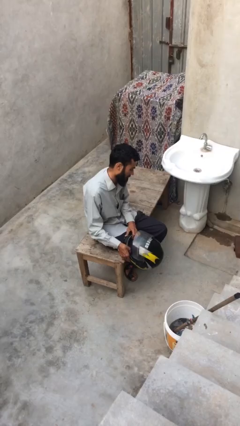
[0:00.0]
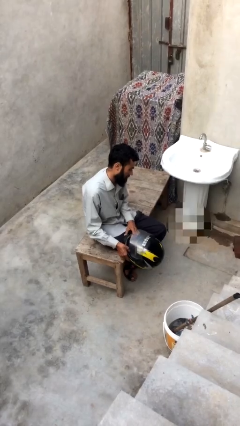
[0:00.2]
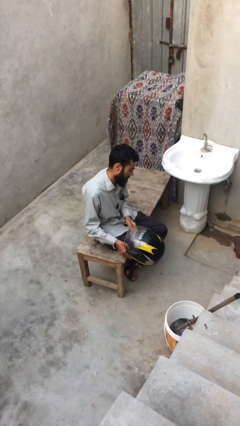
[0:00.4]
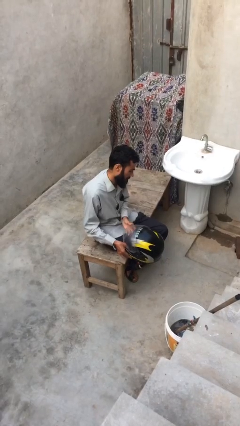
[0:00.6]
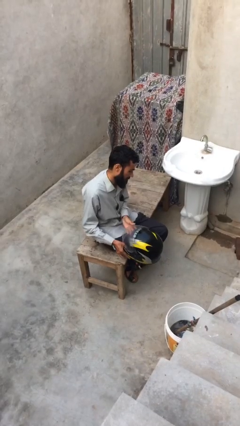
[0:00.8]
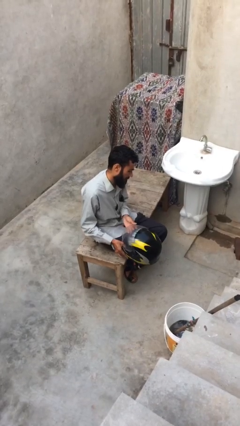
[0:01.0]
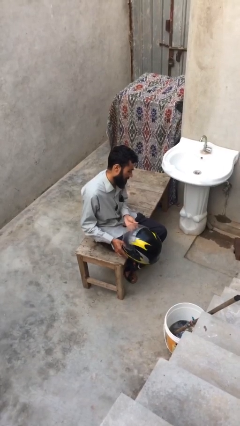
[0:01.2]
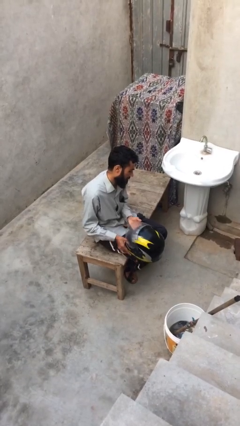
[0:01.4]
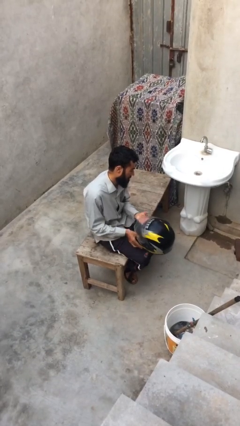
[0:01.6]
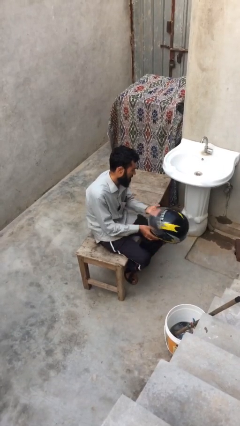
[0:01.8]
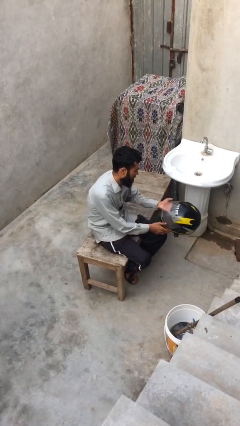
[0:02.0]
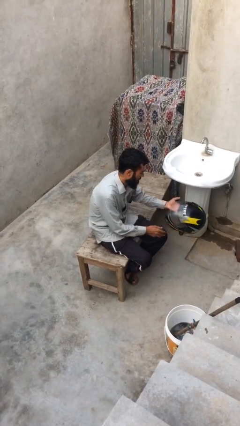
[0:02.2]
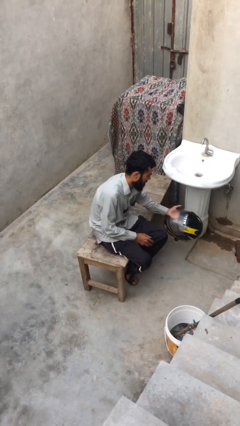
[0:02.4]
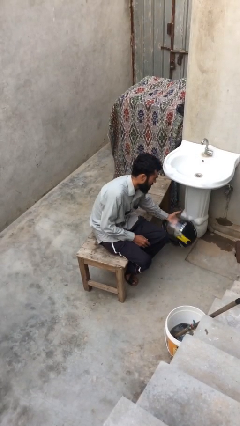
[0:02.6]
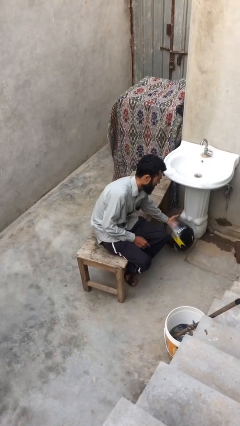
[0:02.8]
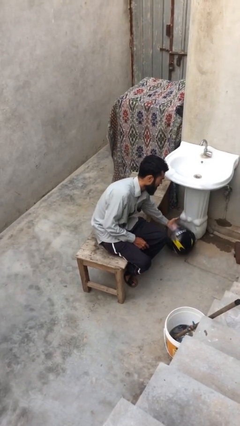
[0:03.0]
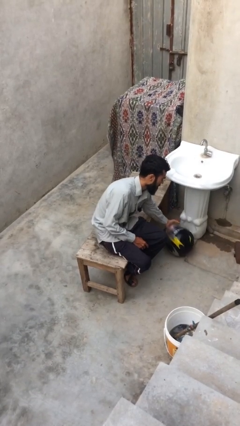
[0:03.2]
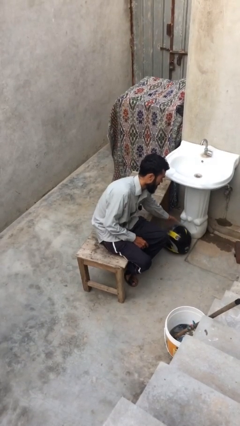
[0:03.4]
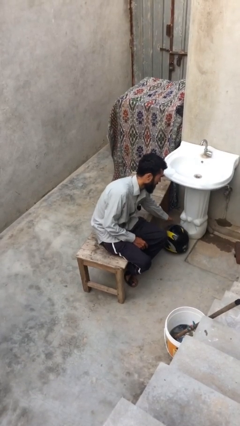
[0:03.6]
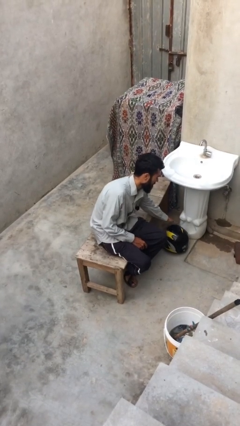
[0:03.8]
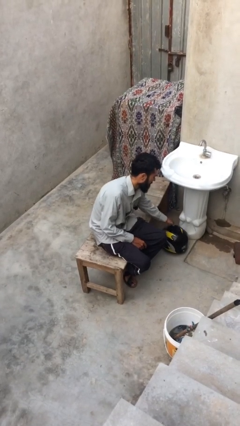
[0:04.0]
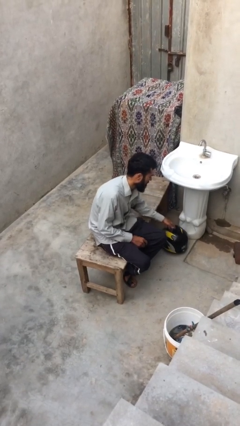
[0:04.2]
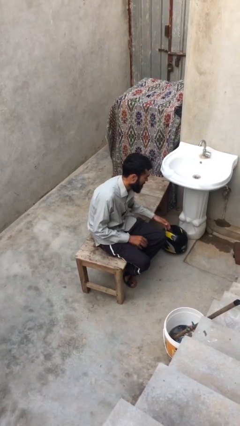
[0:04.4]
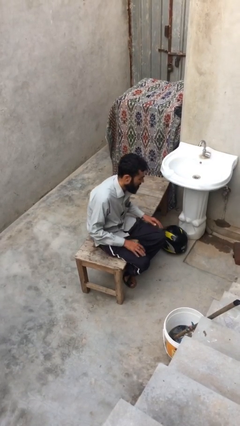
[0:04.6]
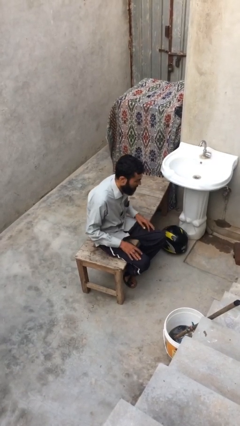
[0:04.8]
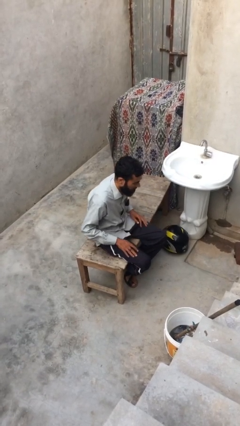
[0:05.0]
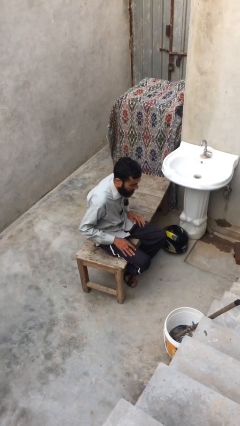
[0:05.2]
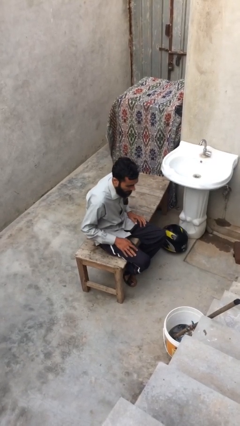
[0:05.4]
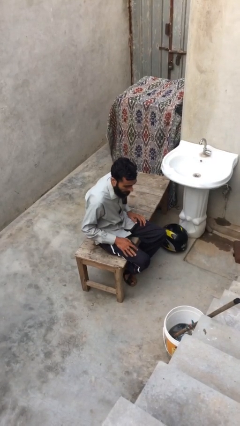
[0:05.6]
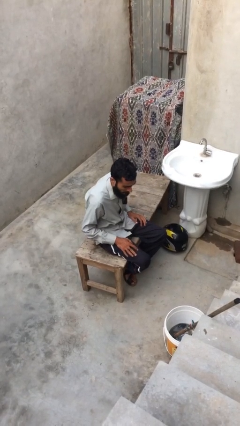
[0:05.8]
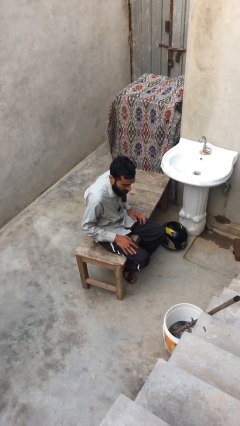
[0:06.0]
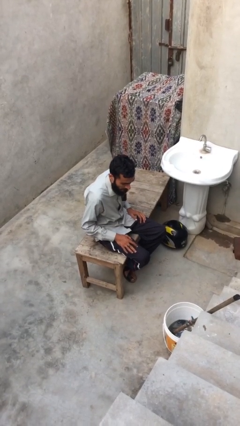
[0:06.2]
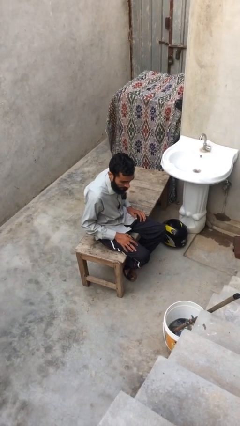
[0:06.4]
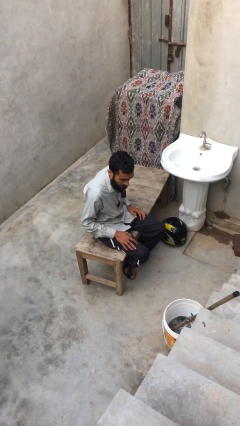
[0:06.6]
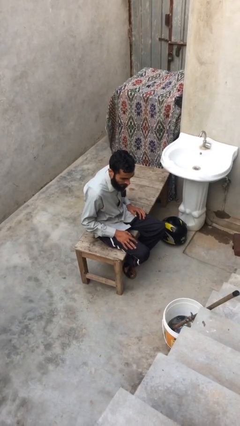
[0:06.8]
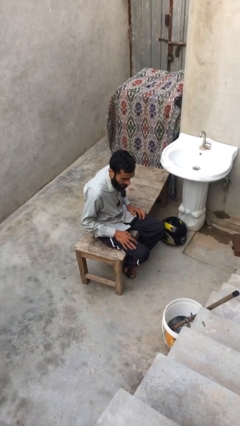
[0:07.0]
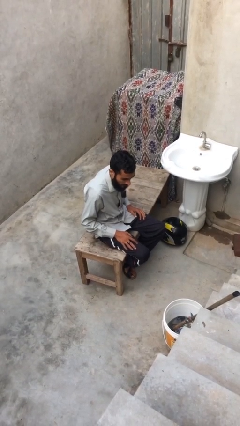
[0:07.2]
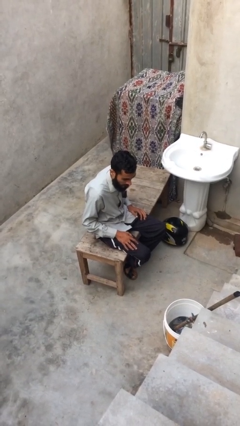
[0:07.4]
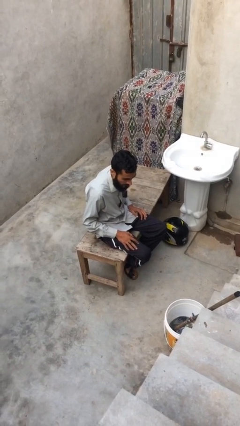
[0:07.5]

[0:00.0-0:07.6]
person puts down object on floor

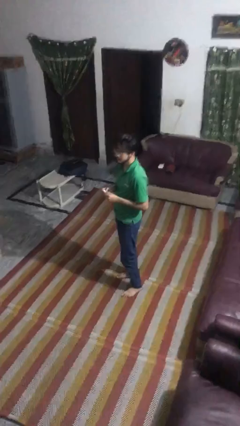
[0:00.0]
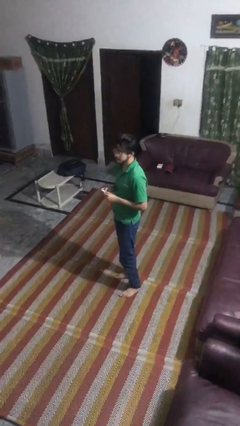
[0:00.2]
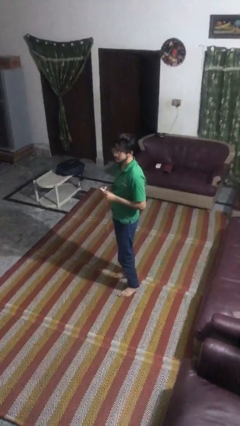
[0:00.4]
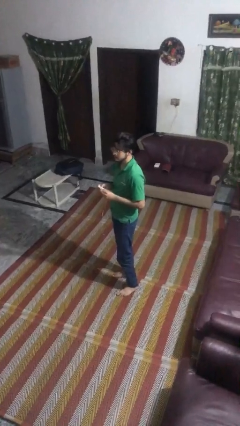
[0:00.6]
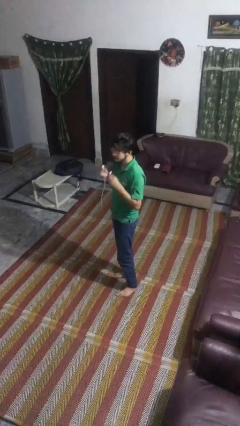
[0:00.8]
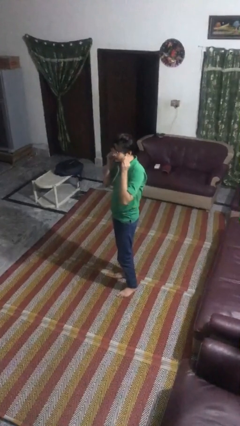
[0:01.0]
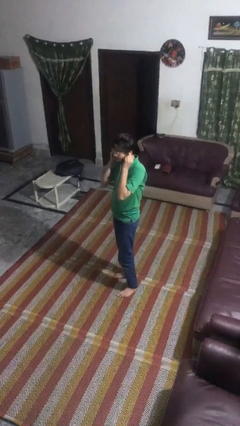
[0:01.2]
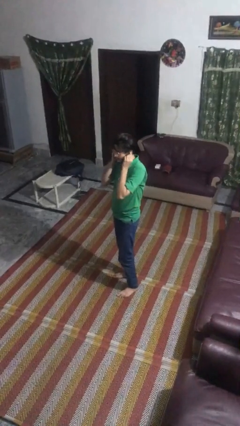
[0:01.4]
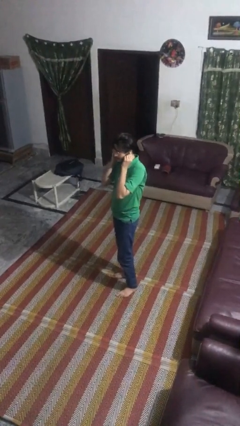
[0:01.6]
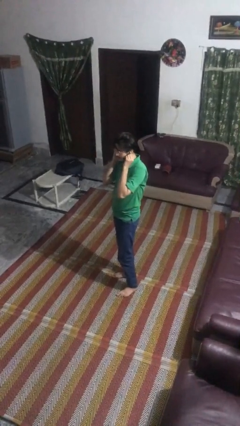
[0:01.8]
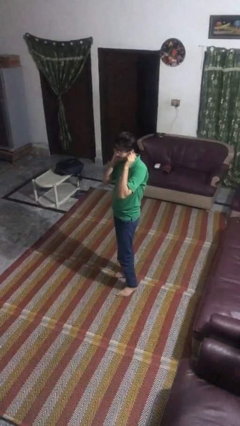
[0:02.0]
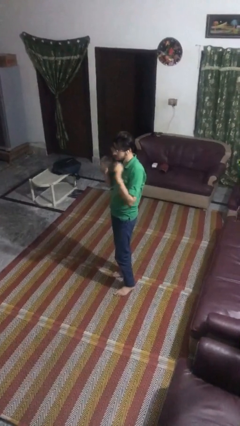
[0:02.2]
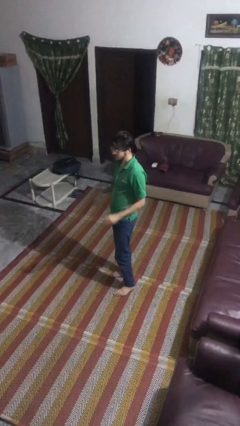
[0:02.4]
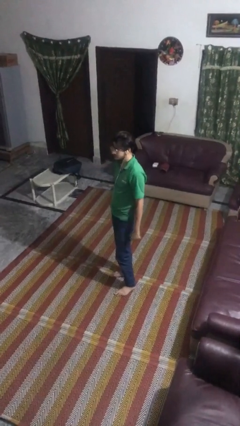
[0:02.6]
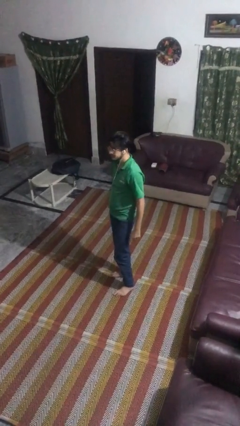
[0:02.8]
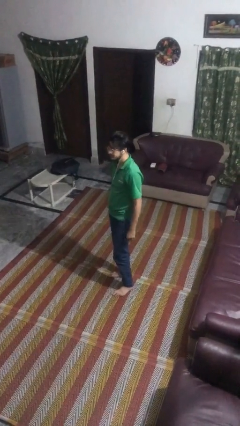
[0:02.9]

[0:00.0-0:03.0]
person puts on headphones

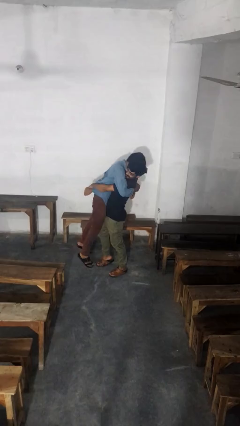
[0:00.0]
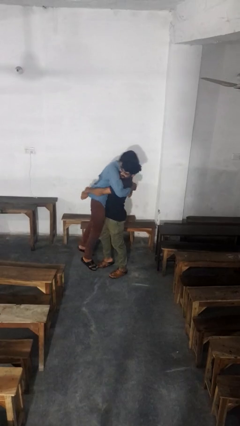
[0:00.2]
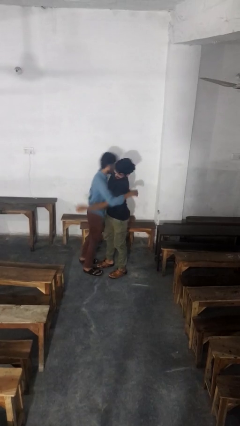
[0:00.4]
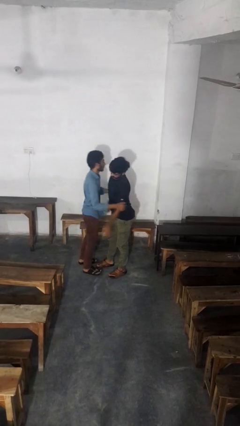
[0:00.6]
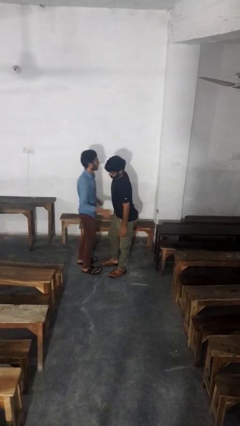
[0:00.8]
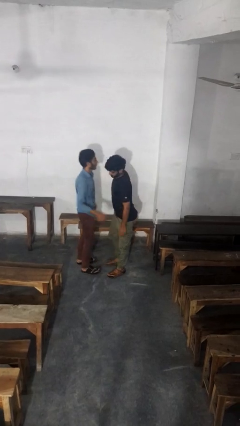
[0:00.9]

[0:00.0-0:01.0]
person puts down person

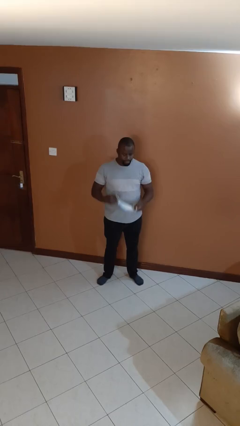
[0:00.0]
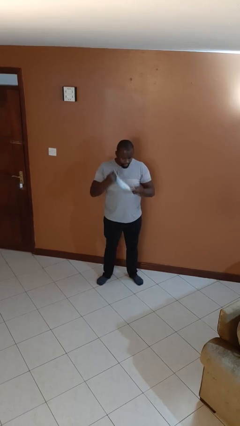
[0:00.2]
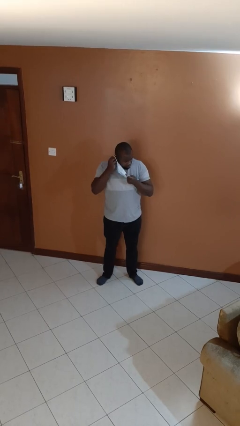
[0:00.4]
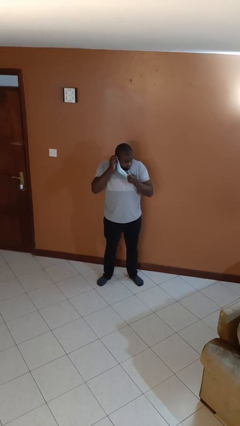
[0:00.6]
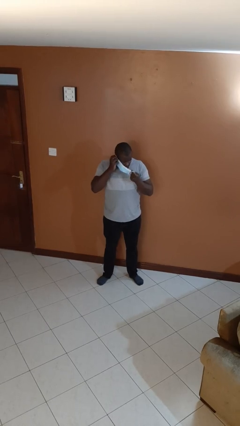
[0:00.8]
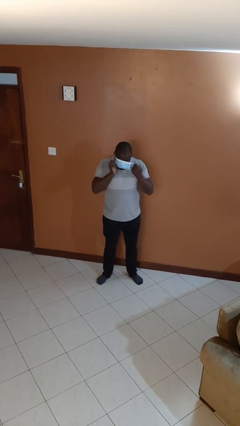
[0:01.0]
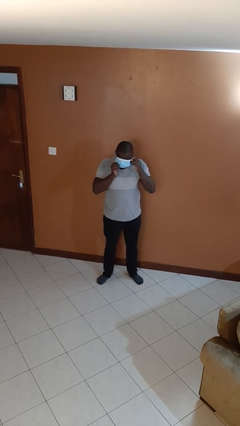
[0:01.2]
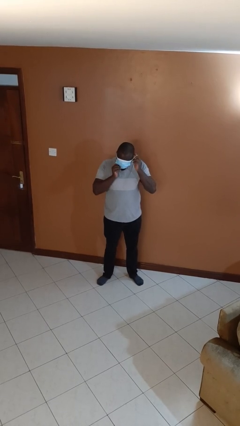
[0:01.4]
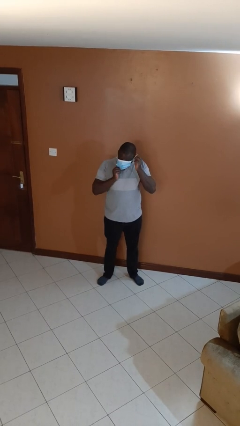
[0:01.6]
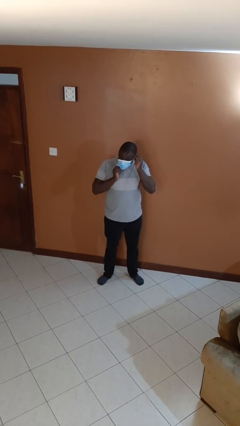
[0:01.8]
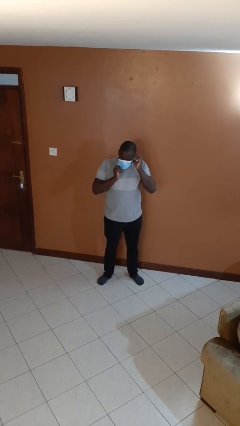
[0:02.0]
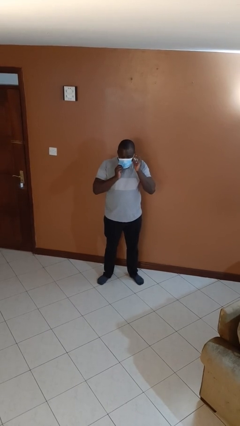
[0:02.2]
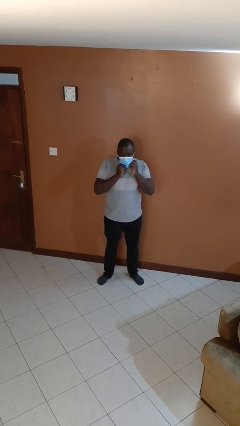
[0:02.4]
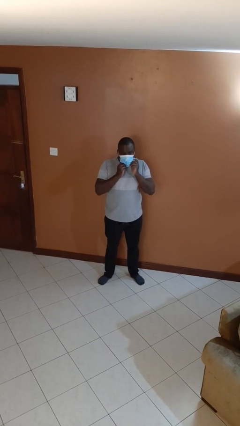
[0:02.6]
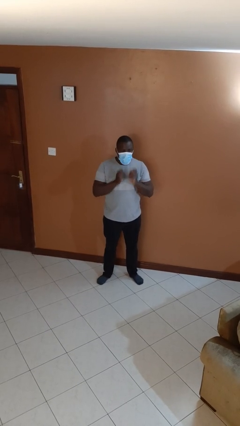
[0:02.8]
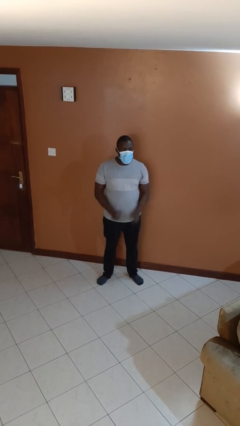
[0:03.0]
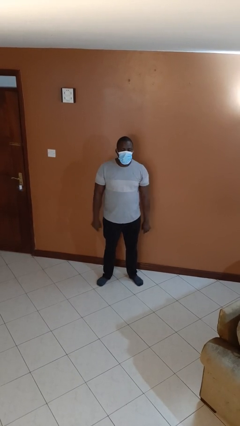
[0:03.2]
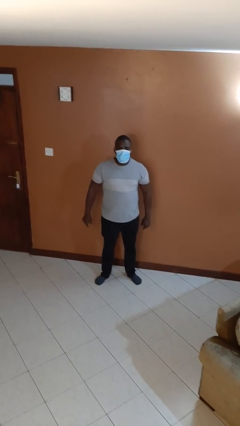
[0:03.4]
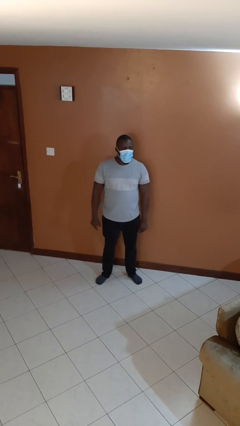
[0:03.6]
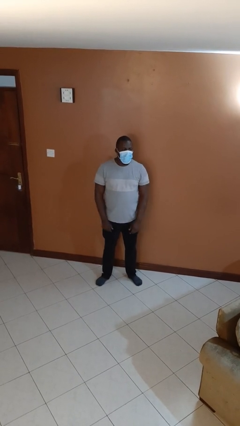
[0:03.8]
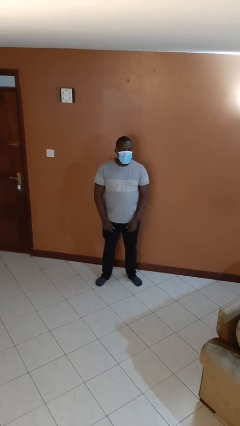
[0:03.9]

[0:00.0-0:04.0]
person puts on facemask

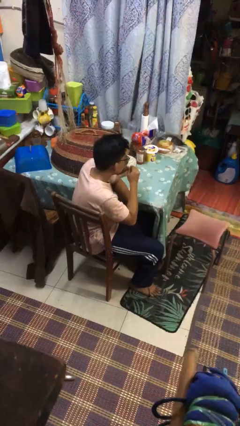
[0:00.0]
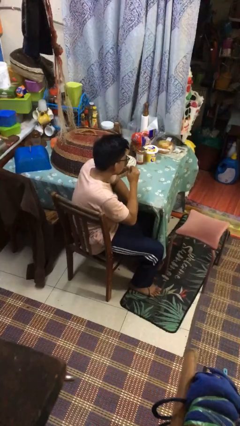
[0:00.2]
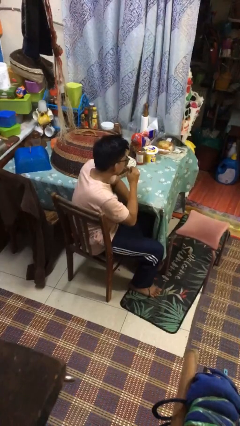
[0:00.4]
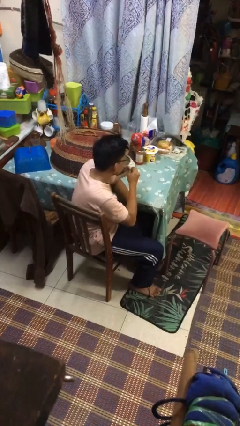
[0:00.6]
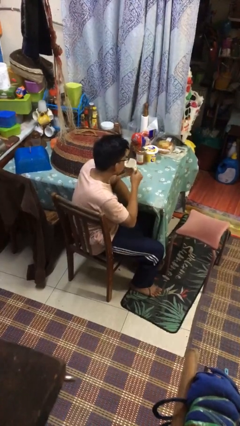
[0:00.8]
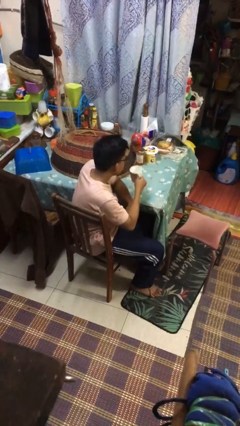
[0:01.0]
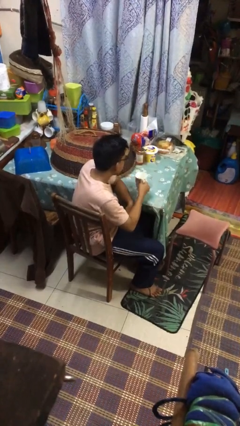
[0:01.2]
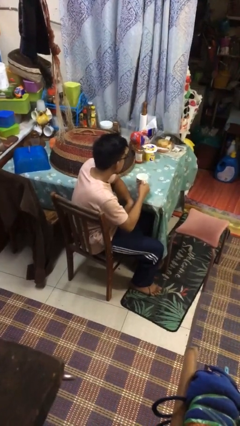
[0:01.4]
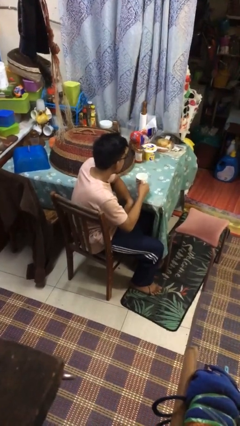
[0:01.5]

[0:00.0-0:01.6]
person puts down object on table

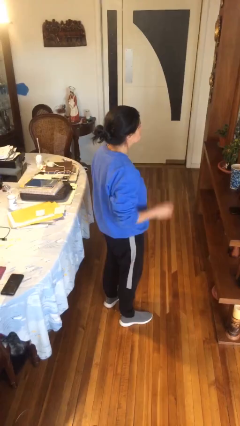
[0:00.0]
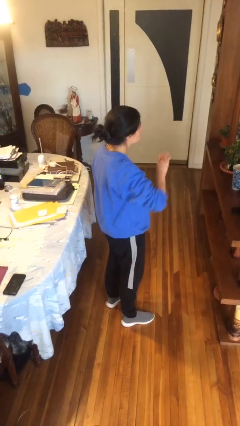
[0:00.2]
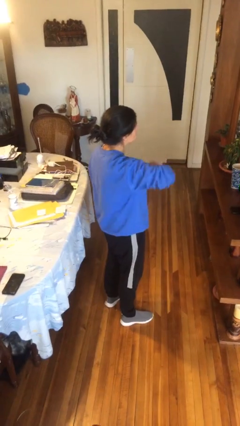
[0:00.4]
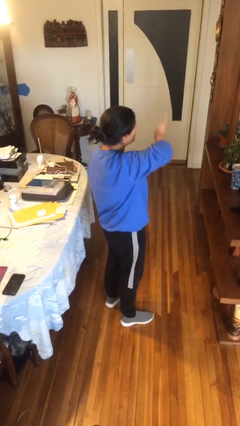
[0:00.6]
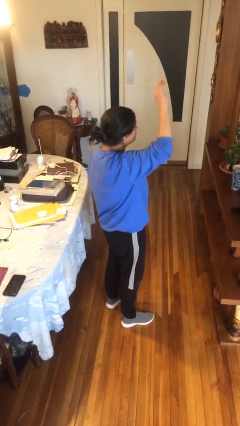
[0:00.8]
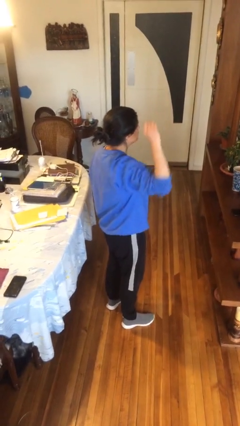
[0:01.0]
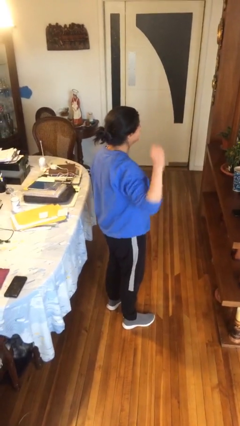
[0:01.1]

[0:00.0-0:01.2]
person gestures swipe up
